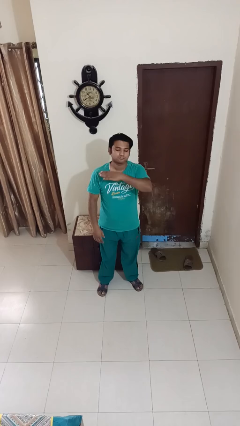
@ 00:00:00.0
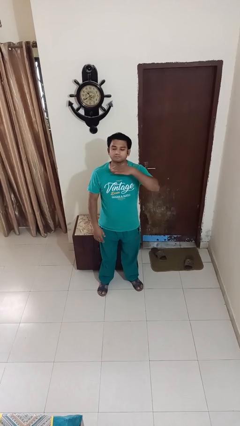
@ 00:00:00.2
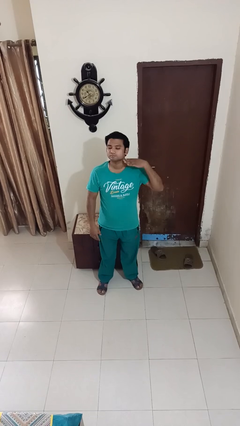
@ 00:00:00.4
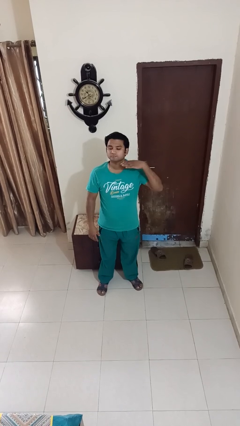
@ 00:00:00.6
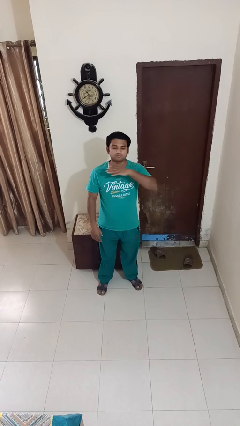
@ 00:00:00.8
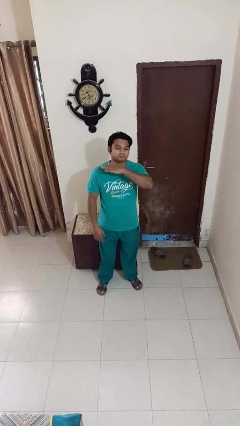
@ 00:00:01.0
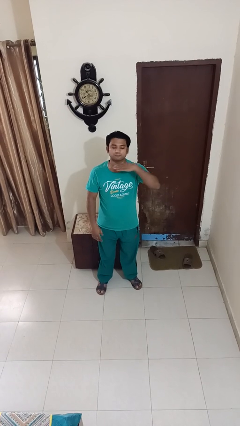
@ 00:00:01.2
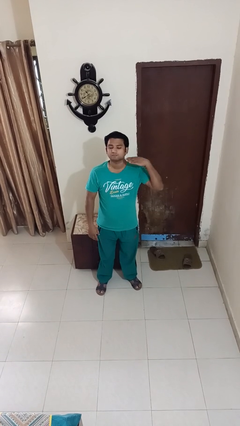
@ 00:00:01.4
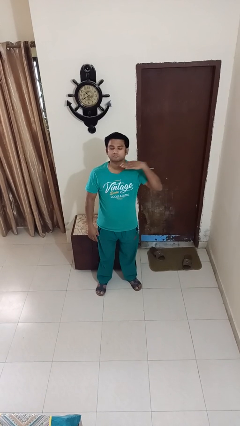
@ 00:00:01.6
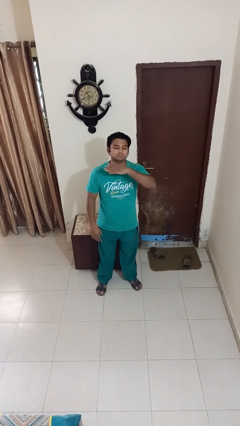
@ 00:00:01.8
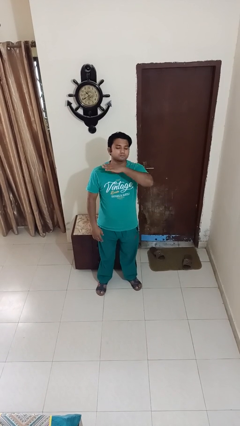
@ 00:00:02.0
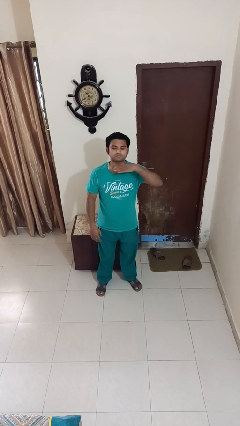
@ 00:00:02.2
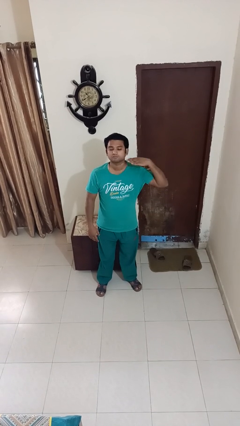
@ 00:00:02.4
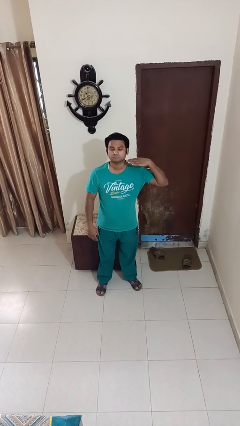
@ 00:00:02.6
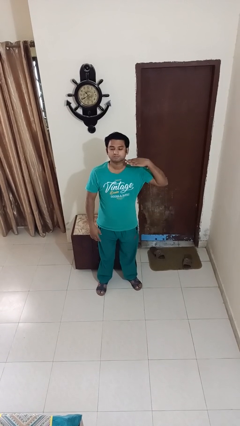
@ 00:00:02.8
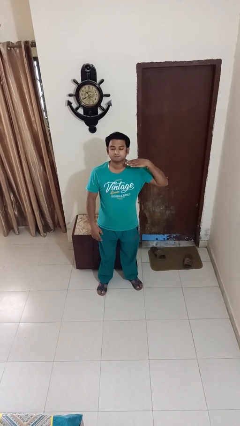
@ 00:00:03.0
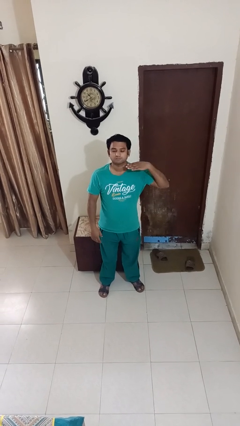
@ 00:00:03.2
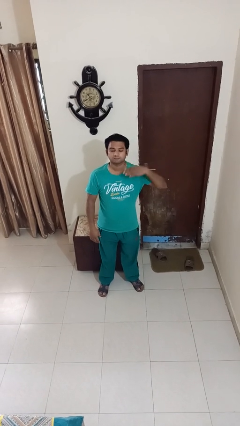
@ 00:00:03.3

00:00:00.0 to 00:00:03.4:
person gestures cut

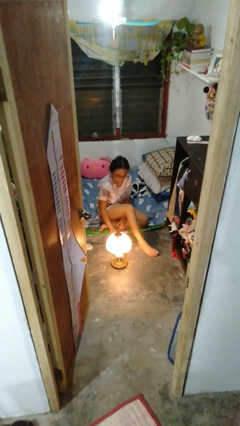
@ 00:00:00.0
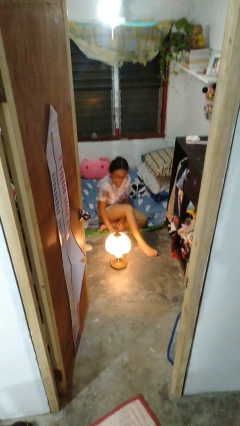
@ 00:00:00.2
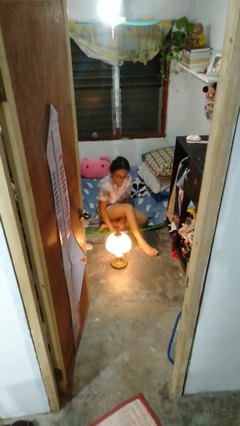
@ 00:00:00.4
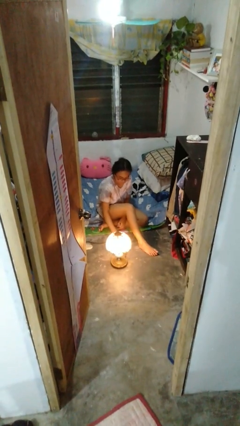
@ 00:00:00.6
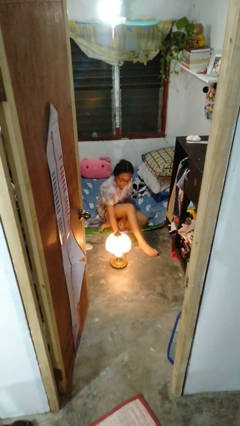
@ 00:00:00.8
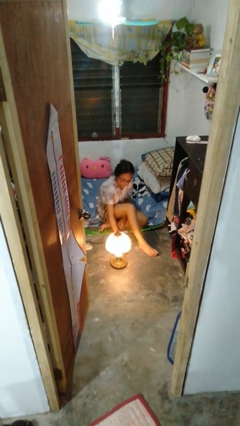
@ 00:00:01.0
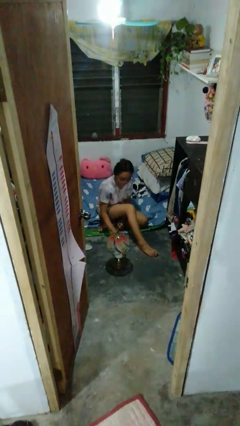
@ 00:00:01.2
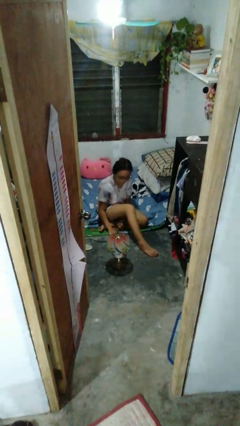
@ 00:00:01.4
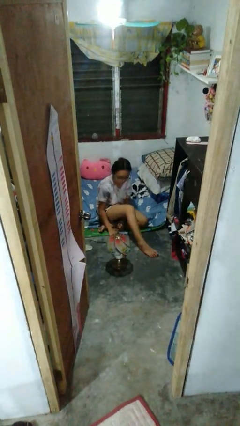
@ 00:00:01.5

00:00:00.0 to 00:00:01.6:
person turns off lamp

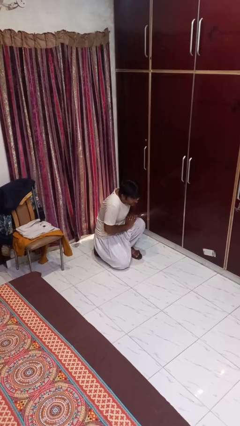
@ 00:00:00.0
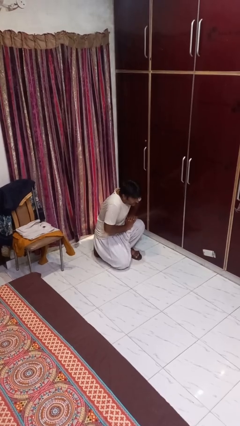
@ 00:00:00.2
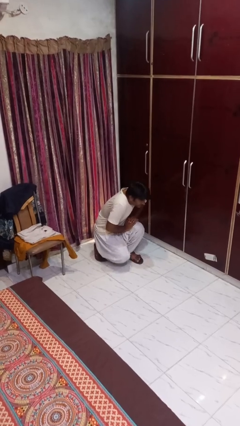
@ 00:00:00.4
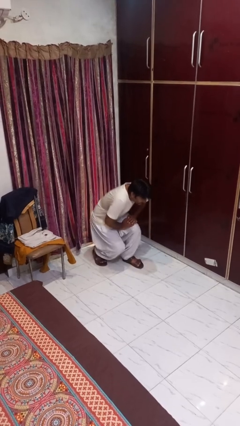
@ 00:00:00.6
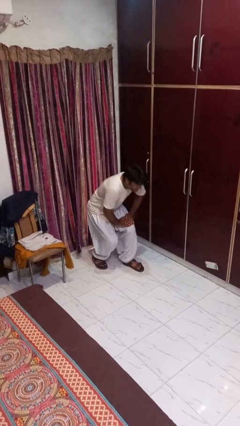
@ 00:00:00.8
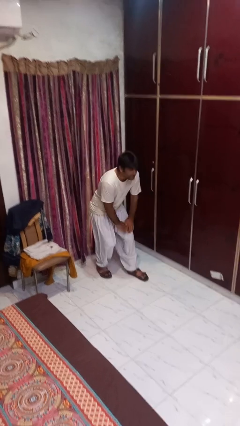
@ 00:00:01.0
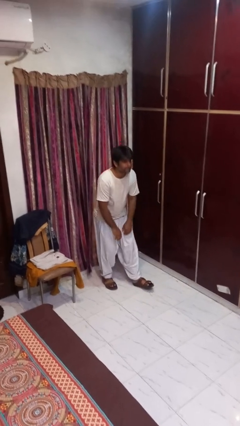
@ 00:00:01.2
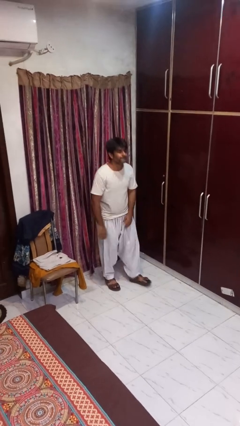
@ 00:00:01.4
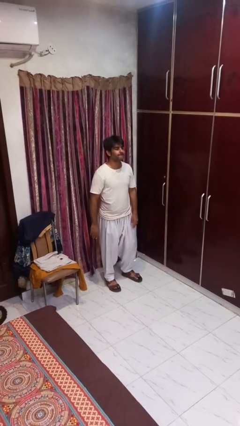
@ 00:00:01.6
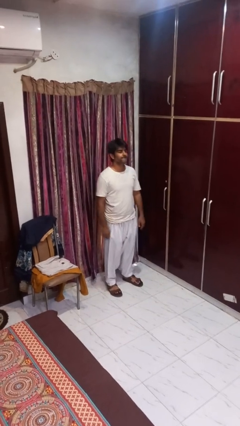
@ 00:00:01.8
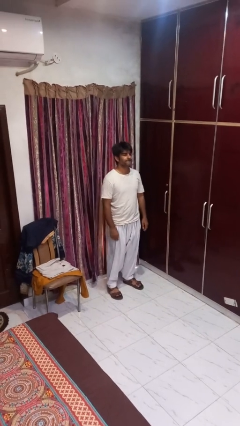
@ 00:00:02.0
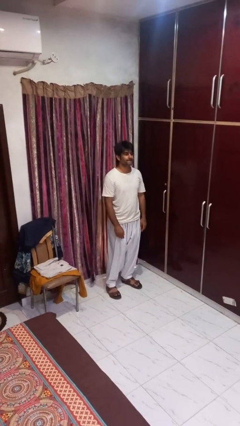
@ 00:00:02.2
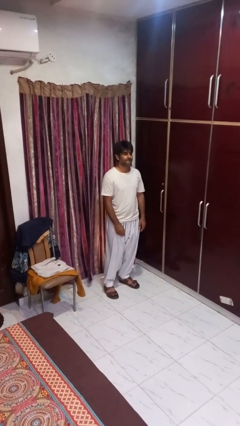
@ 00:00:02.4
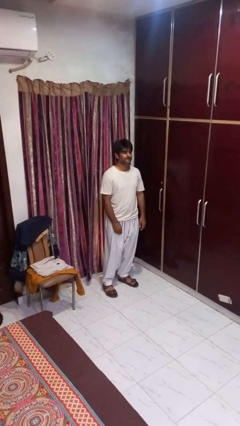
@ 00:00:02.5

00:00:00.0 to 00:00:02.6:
person stands up from floor

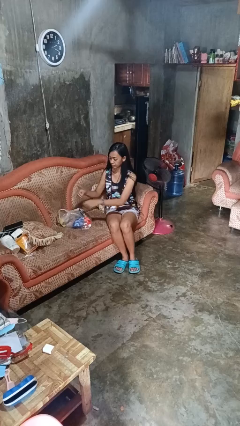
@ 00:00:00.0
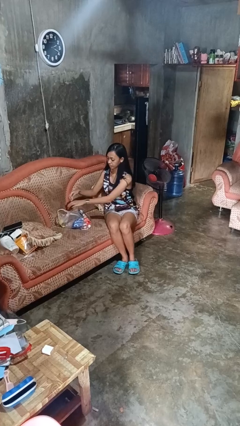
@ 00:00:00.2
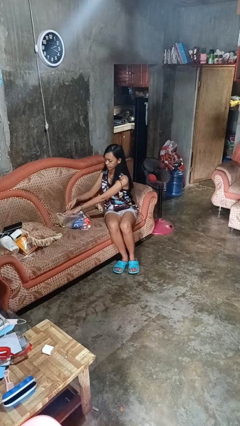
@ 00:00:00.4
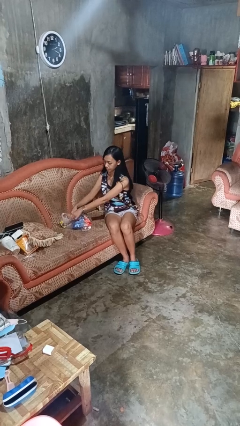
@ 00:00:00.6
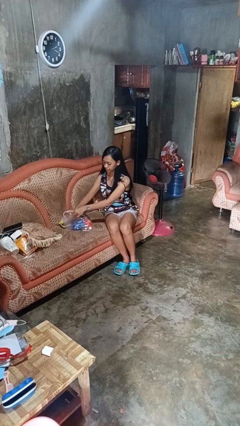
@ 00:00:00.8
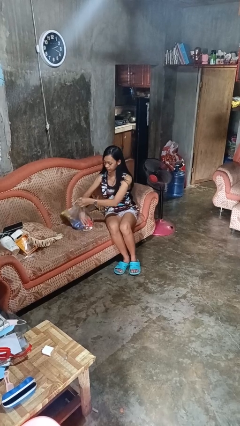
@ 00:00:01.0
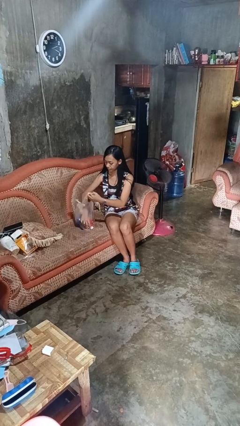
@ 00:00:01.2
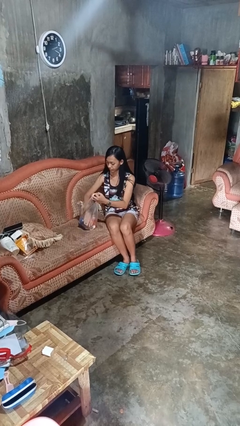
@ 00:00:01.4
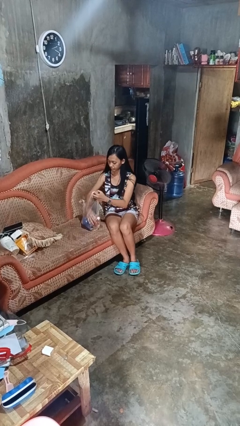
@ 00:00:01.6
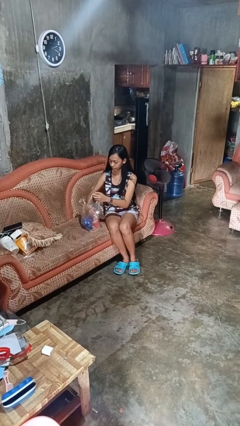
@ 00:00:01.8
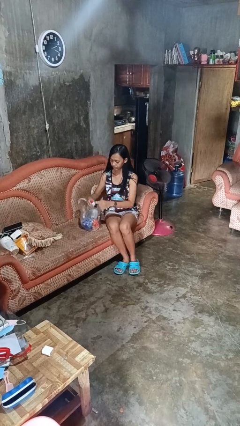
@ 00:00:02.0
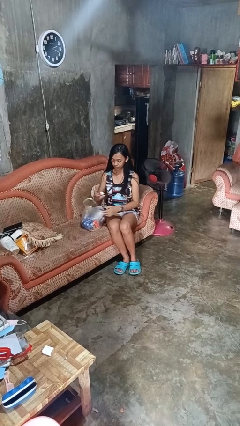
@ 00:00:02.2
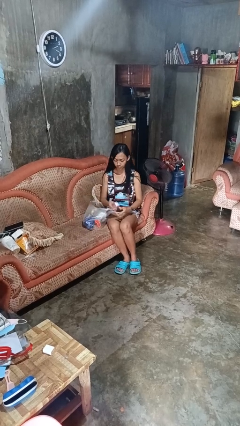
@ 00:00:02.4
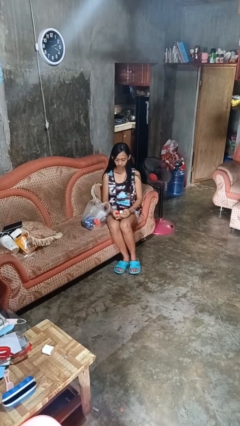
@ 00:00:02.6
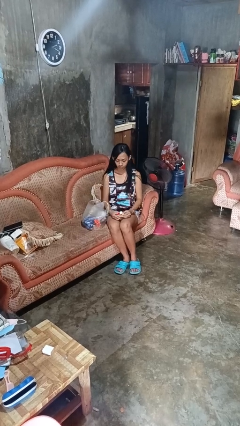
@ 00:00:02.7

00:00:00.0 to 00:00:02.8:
person takes object from bag

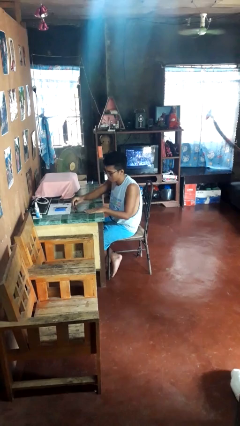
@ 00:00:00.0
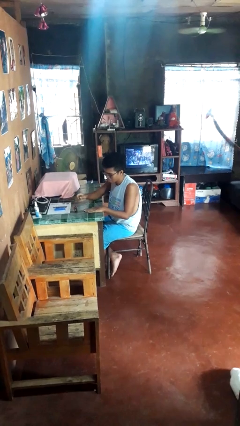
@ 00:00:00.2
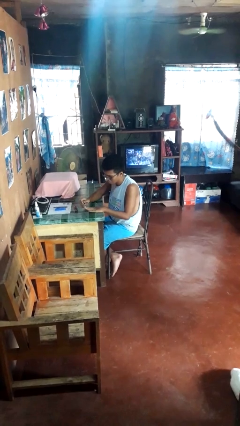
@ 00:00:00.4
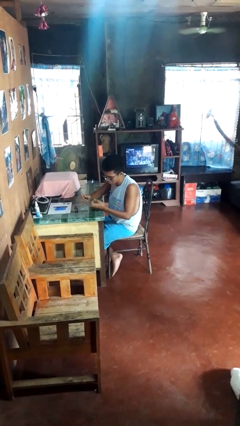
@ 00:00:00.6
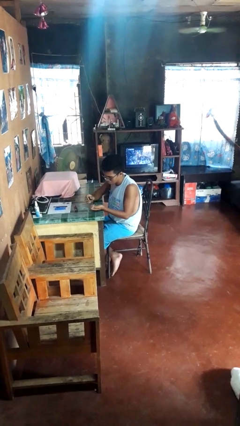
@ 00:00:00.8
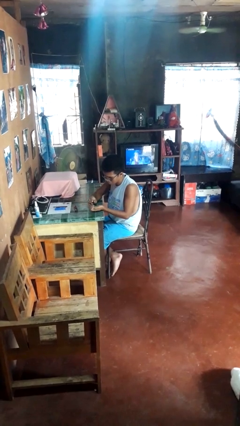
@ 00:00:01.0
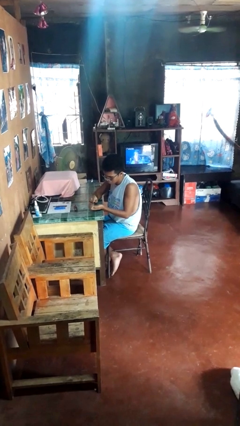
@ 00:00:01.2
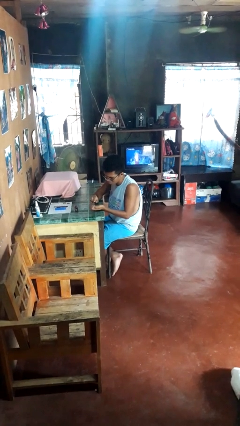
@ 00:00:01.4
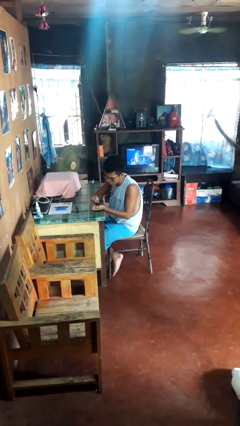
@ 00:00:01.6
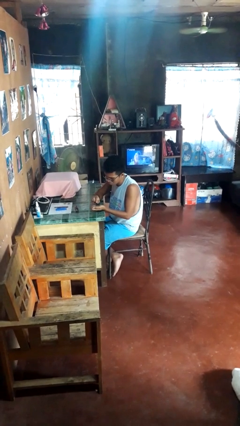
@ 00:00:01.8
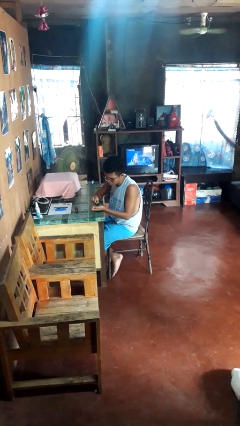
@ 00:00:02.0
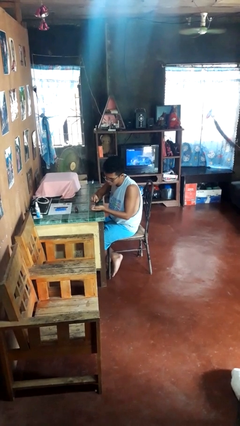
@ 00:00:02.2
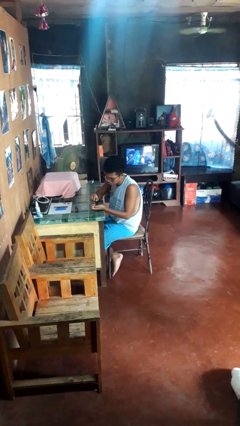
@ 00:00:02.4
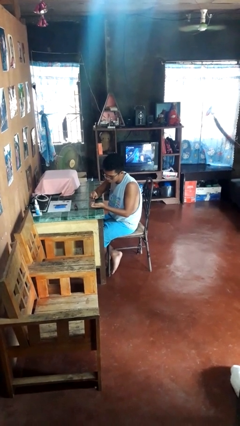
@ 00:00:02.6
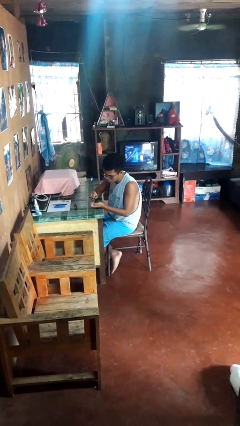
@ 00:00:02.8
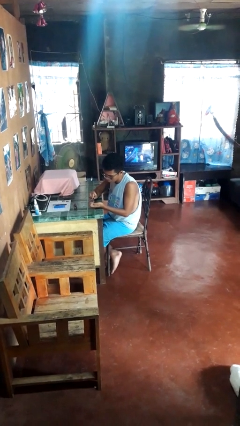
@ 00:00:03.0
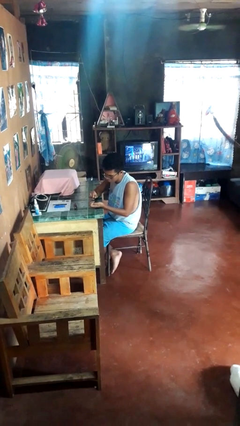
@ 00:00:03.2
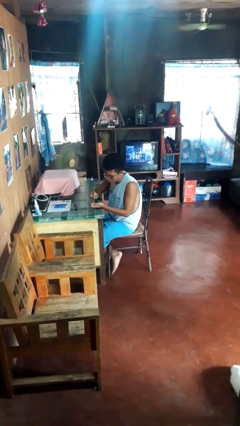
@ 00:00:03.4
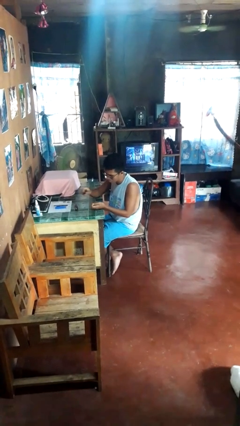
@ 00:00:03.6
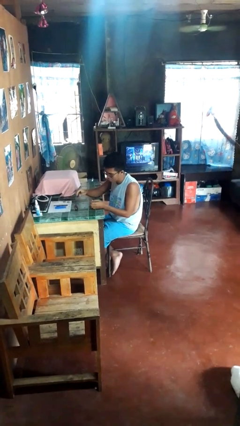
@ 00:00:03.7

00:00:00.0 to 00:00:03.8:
person paints fingernails

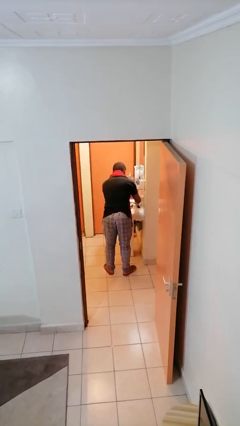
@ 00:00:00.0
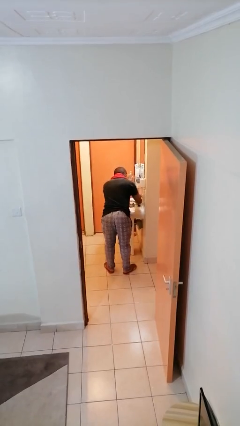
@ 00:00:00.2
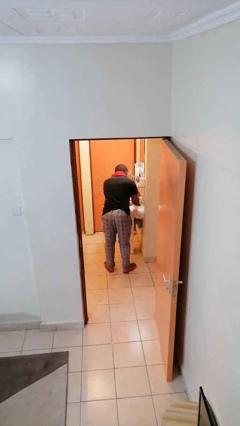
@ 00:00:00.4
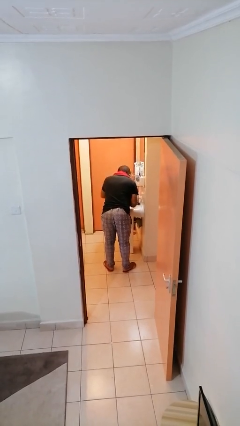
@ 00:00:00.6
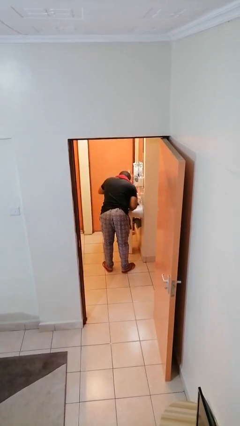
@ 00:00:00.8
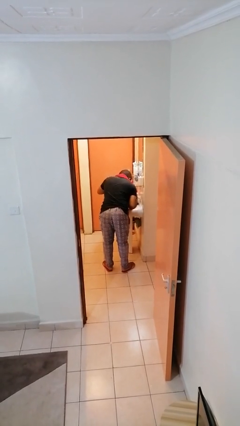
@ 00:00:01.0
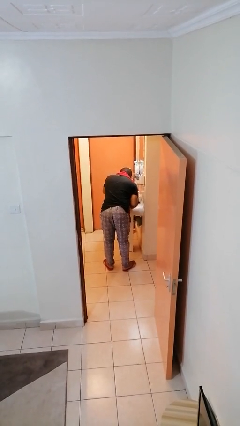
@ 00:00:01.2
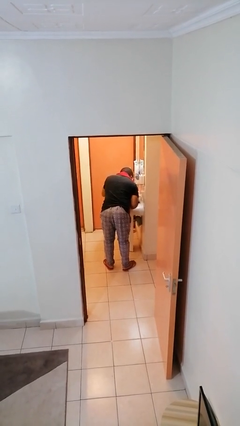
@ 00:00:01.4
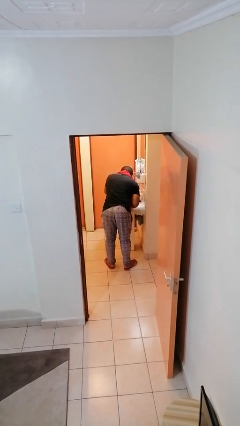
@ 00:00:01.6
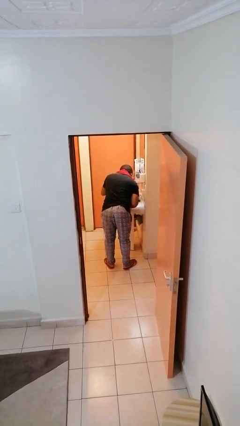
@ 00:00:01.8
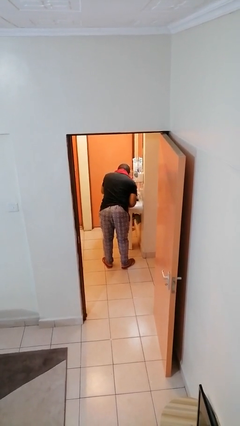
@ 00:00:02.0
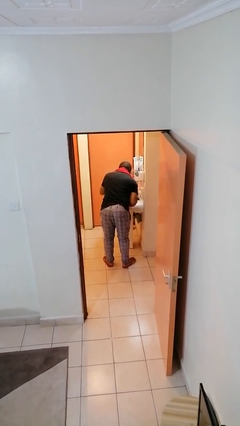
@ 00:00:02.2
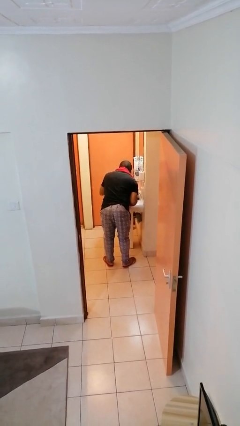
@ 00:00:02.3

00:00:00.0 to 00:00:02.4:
person washes face
